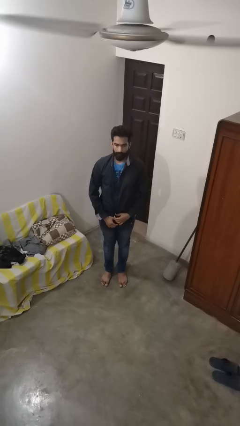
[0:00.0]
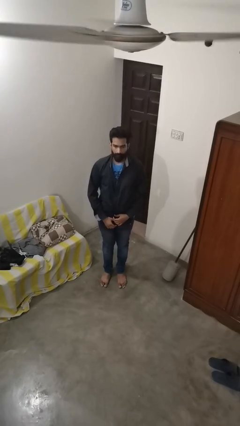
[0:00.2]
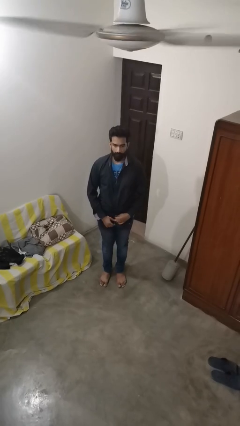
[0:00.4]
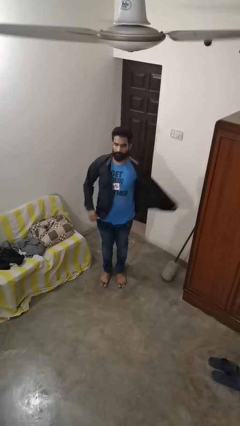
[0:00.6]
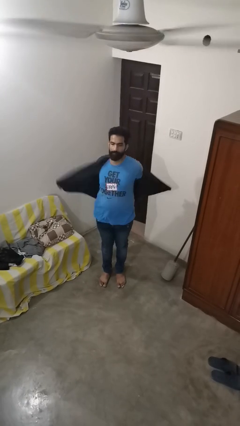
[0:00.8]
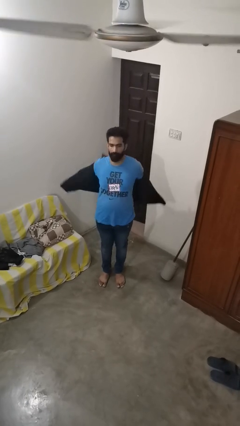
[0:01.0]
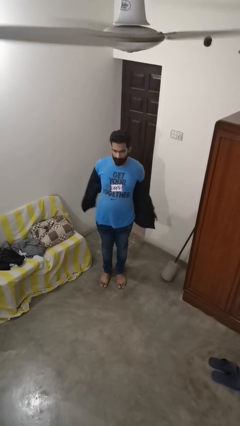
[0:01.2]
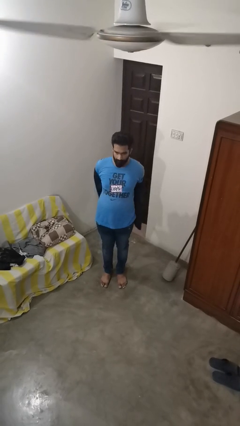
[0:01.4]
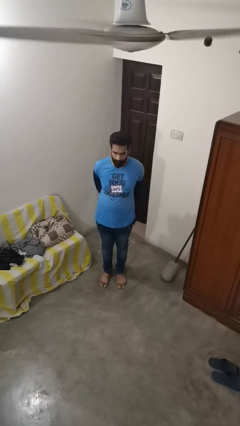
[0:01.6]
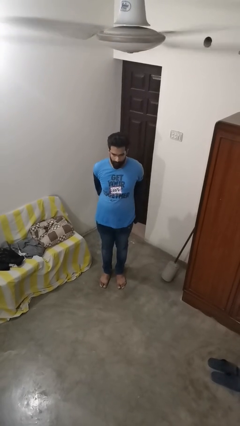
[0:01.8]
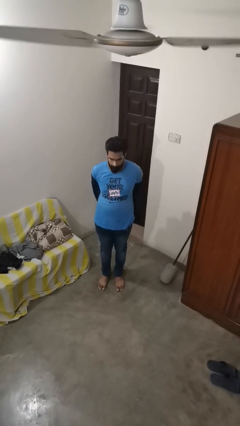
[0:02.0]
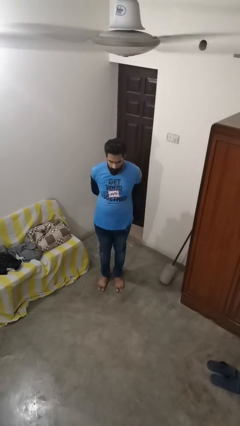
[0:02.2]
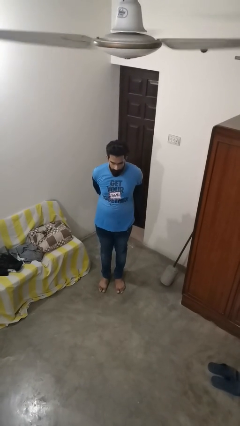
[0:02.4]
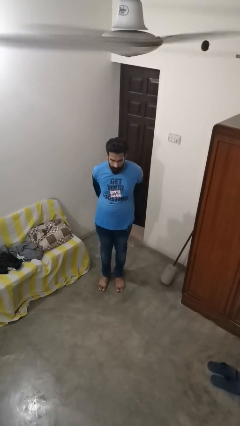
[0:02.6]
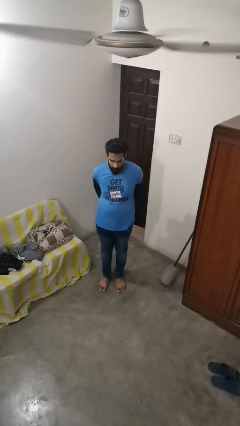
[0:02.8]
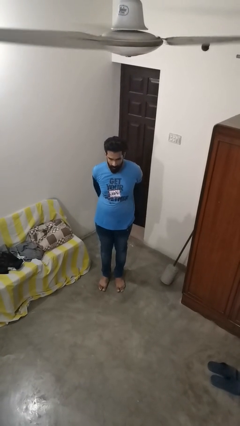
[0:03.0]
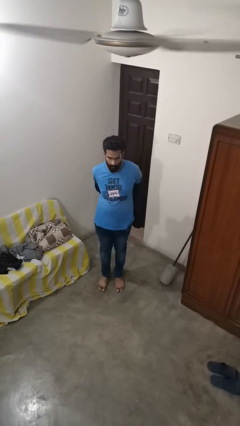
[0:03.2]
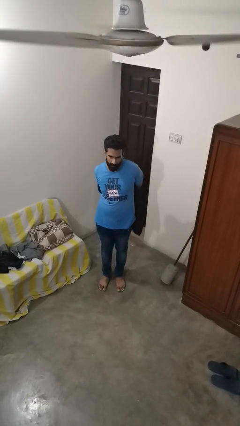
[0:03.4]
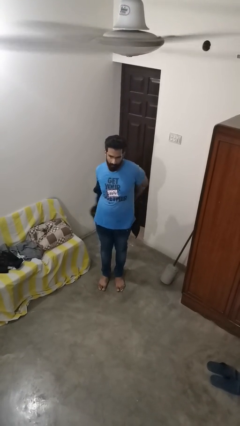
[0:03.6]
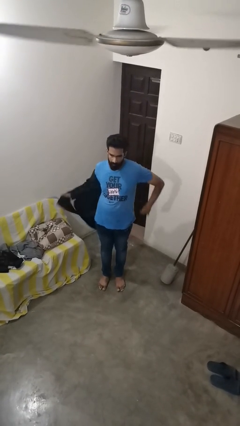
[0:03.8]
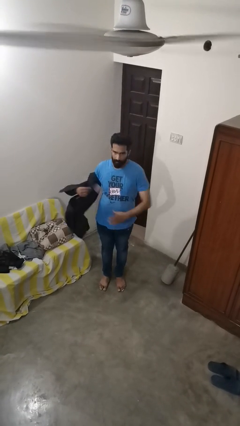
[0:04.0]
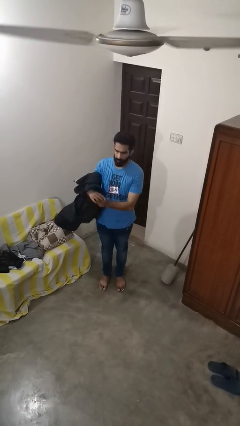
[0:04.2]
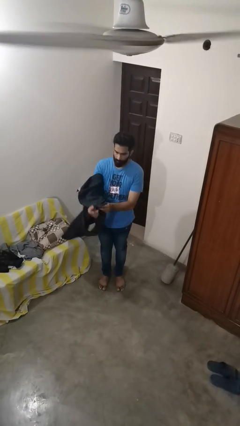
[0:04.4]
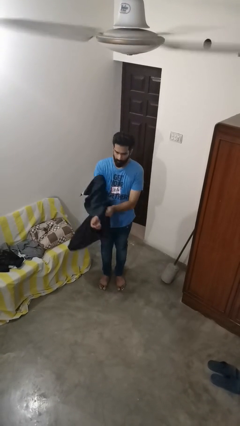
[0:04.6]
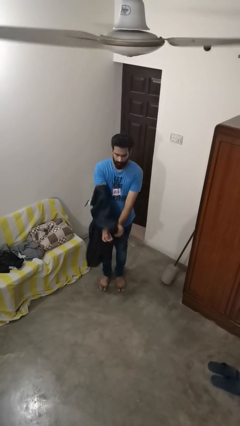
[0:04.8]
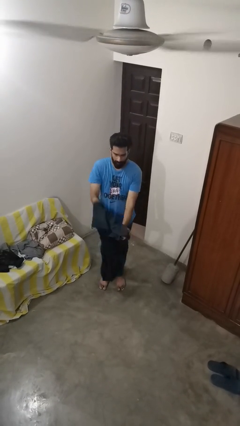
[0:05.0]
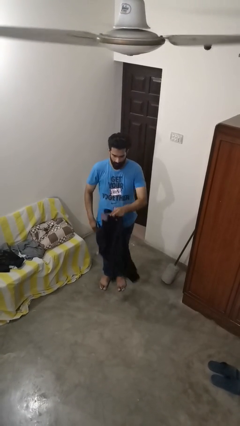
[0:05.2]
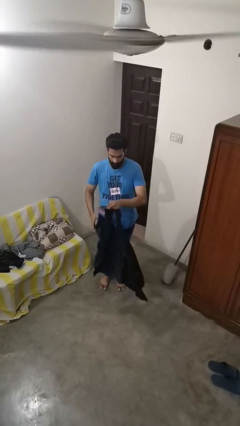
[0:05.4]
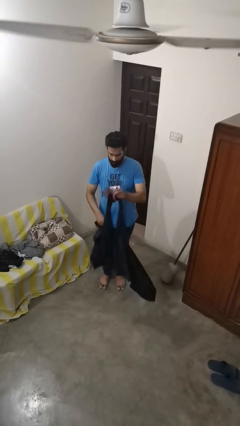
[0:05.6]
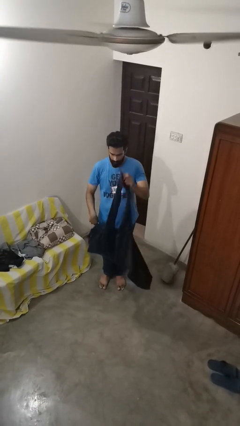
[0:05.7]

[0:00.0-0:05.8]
person takes off shirt

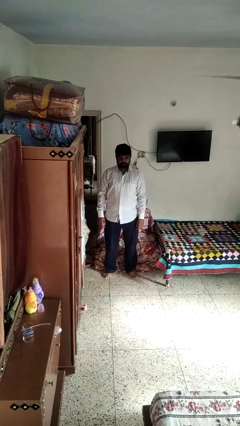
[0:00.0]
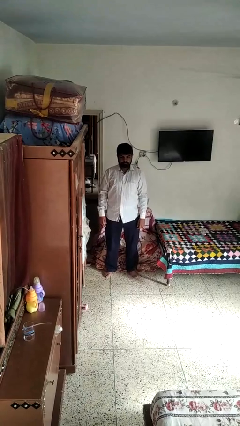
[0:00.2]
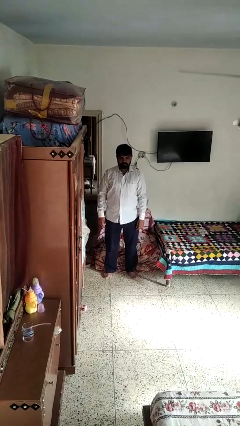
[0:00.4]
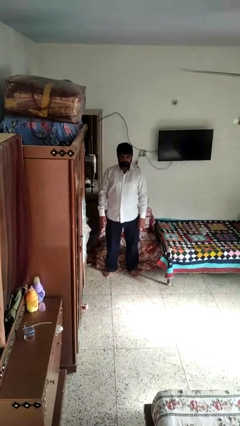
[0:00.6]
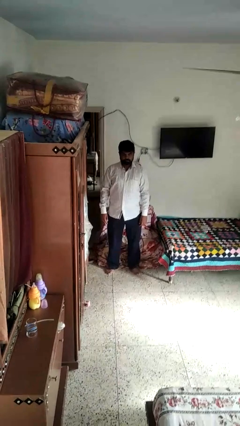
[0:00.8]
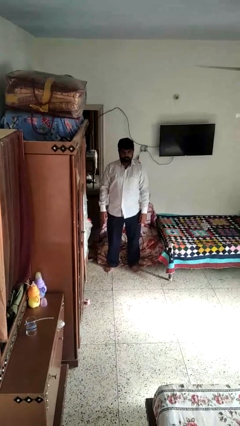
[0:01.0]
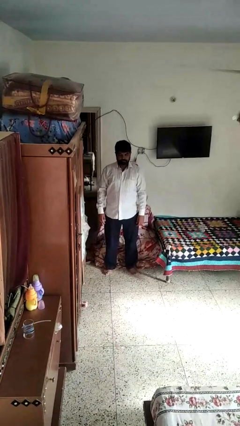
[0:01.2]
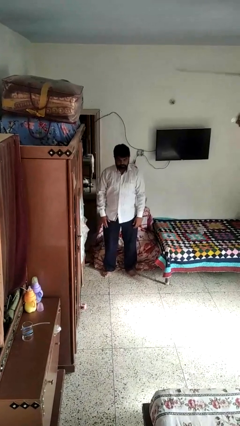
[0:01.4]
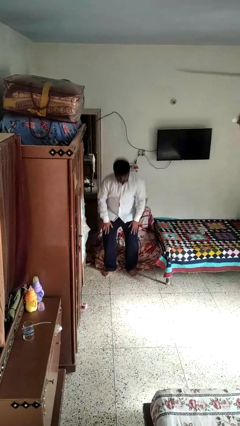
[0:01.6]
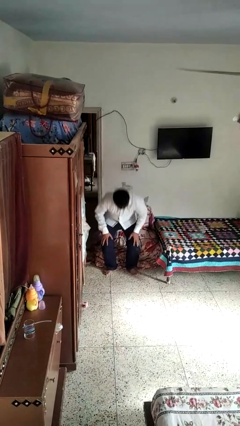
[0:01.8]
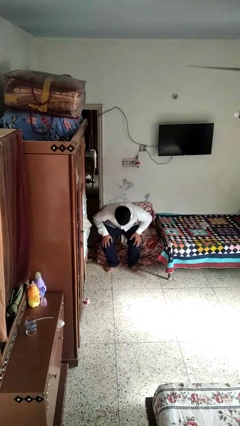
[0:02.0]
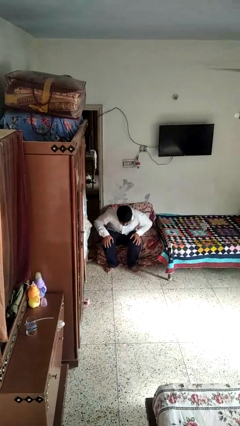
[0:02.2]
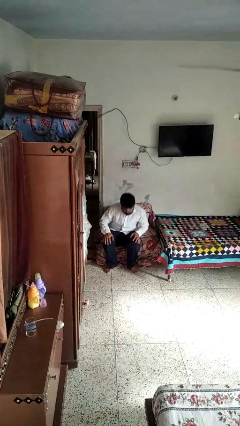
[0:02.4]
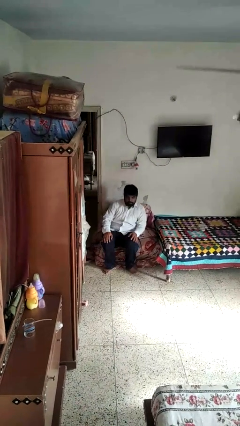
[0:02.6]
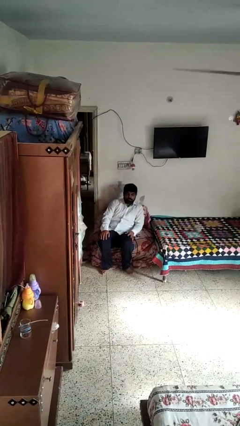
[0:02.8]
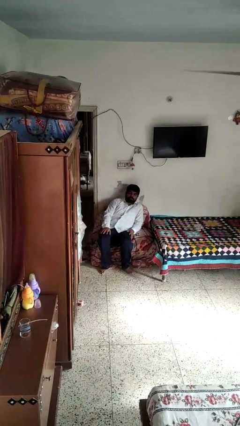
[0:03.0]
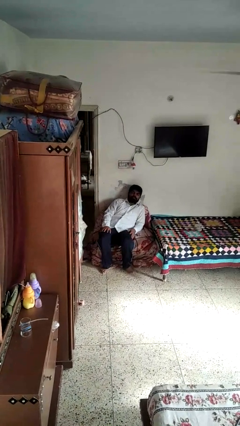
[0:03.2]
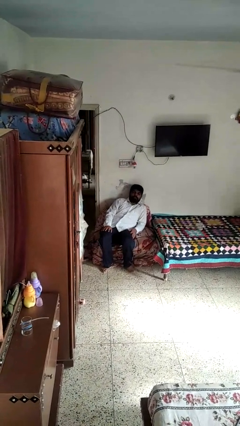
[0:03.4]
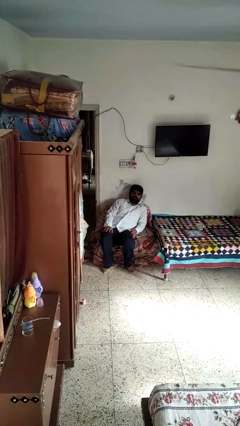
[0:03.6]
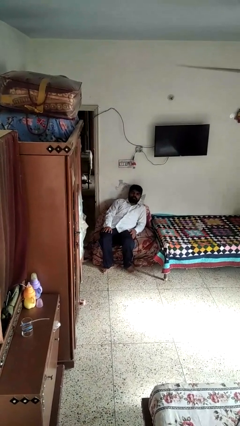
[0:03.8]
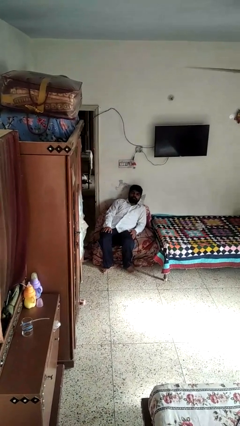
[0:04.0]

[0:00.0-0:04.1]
person lies down on couch

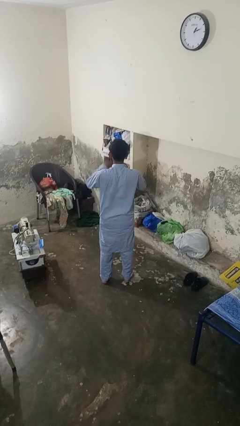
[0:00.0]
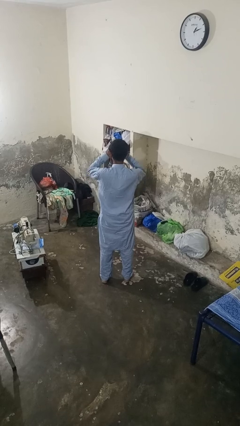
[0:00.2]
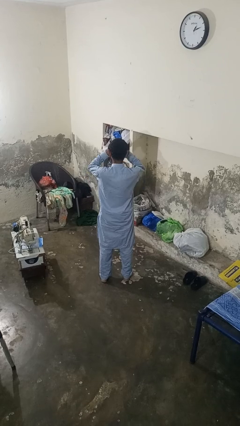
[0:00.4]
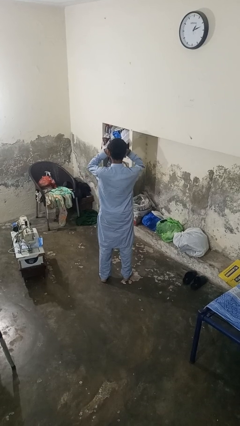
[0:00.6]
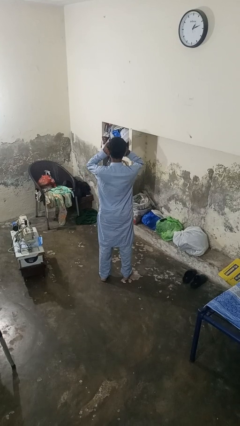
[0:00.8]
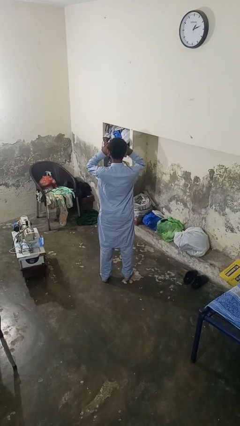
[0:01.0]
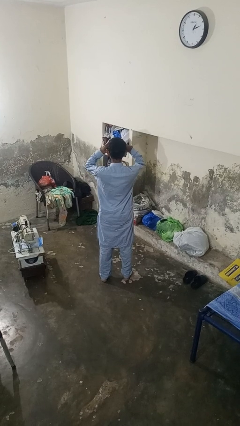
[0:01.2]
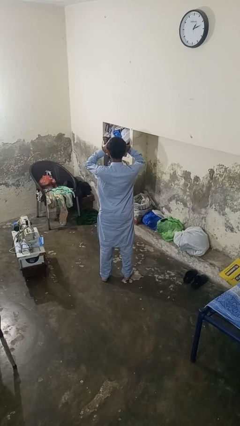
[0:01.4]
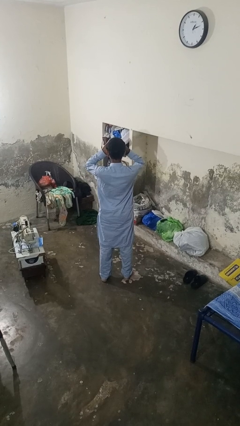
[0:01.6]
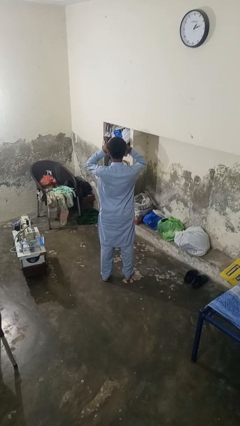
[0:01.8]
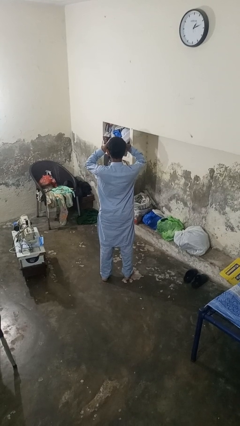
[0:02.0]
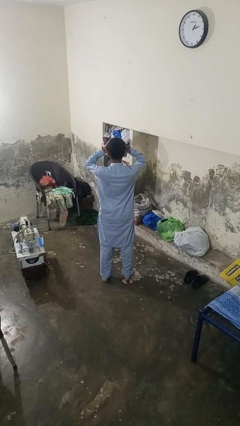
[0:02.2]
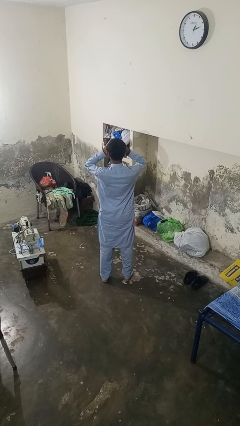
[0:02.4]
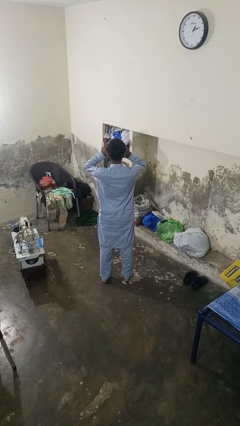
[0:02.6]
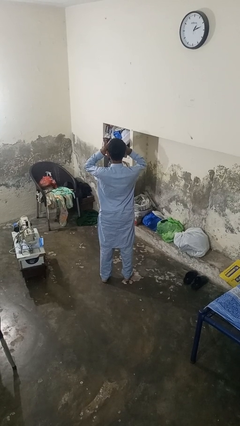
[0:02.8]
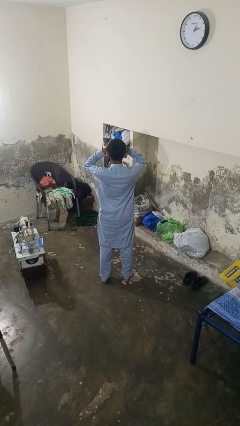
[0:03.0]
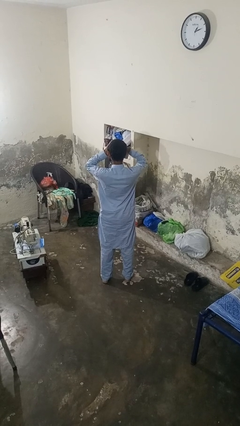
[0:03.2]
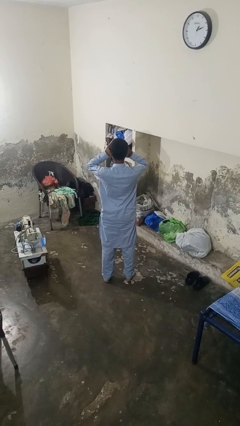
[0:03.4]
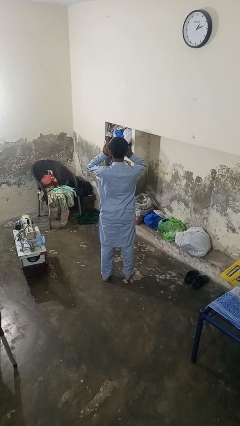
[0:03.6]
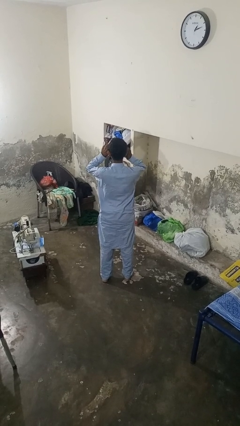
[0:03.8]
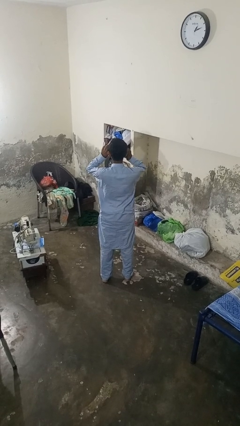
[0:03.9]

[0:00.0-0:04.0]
person rubs eyes

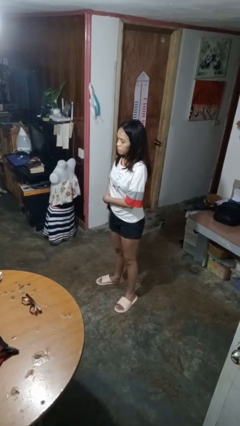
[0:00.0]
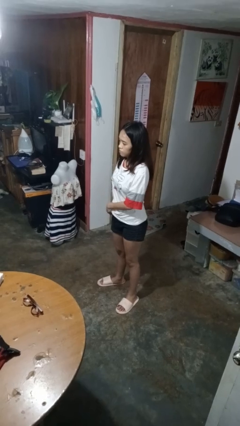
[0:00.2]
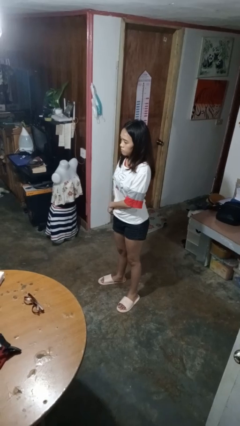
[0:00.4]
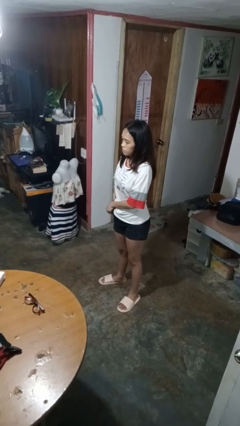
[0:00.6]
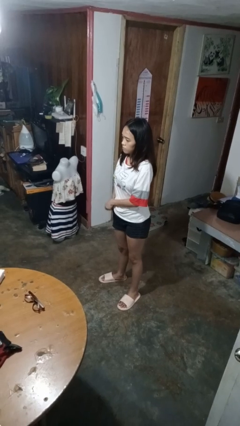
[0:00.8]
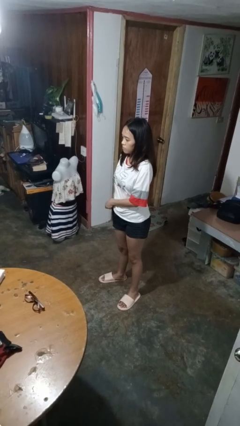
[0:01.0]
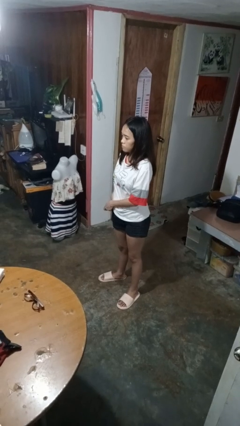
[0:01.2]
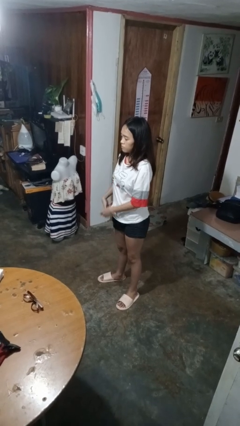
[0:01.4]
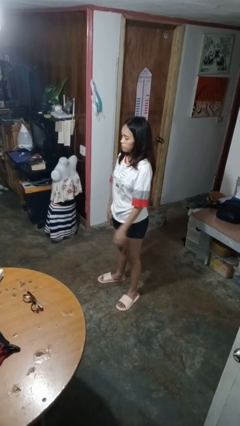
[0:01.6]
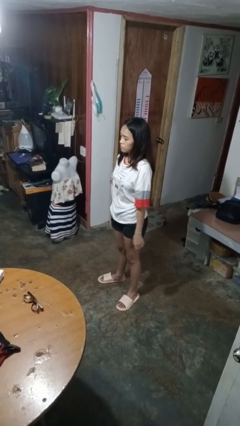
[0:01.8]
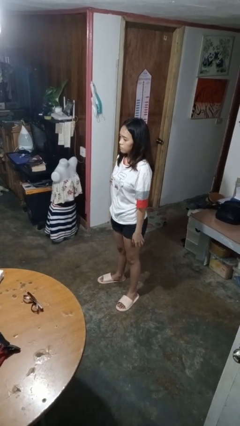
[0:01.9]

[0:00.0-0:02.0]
person puts phone into pocket

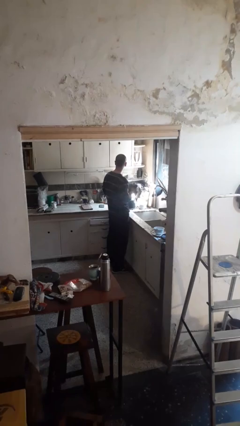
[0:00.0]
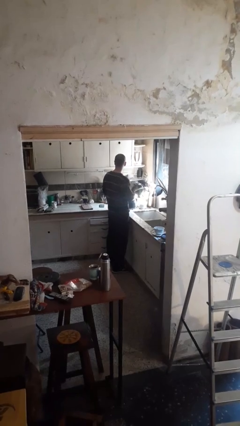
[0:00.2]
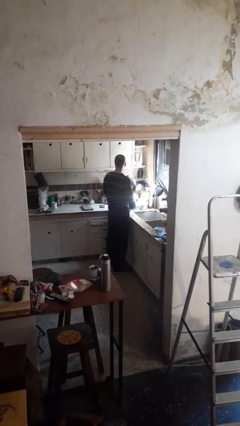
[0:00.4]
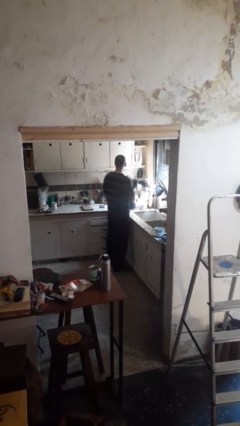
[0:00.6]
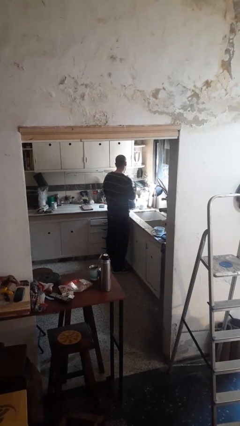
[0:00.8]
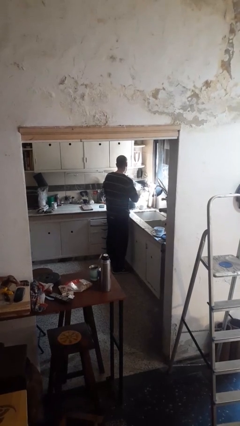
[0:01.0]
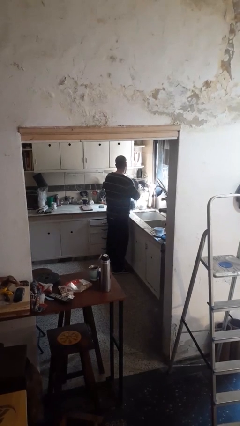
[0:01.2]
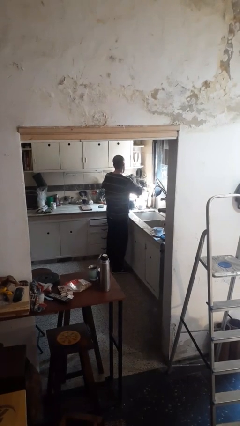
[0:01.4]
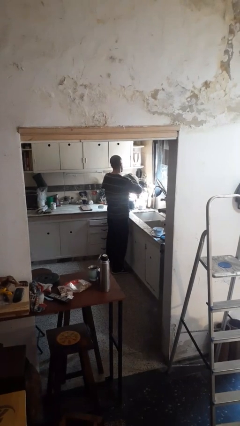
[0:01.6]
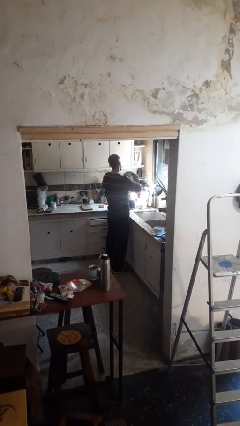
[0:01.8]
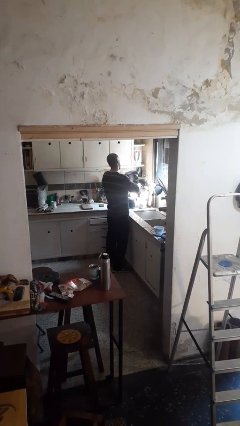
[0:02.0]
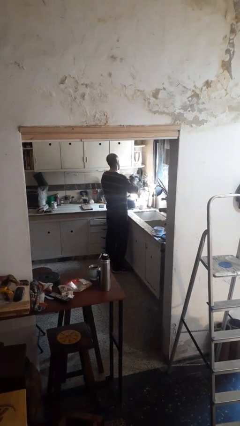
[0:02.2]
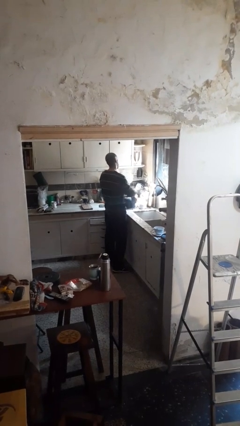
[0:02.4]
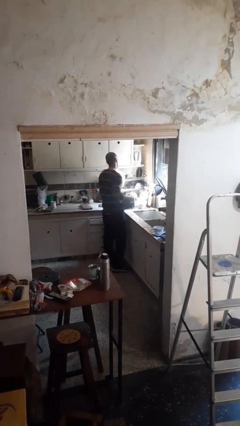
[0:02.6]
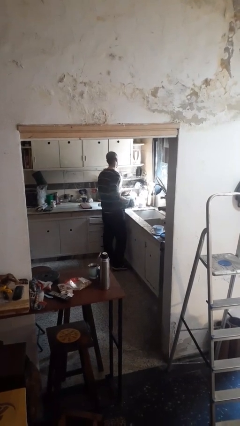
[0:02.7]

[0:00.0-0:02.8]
person dries dish
